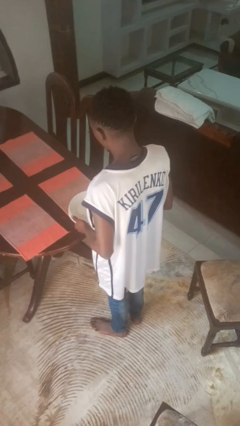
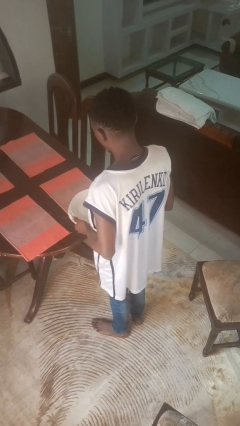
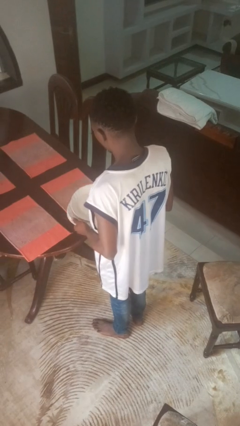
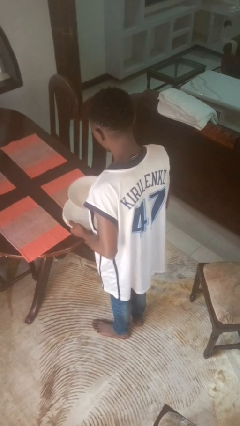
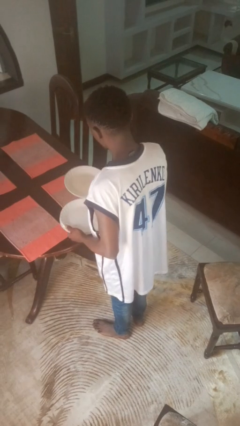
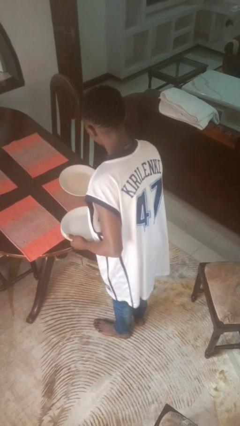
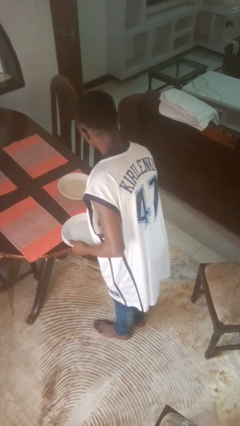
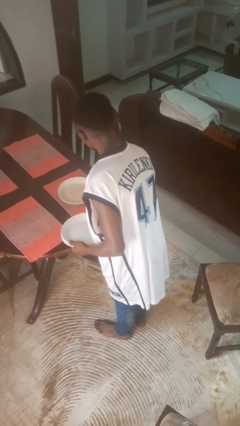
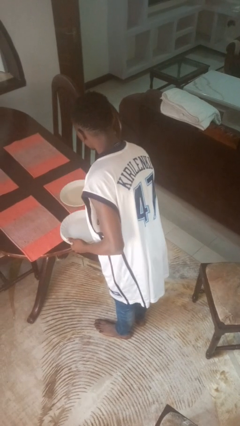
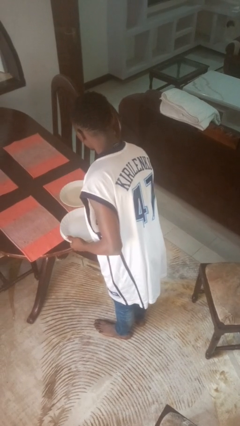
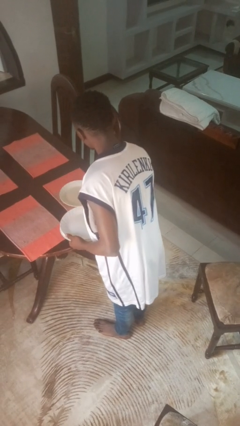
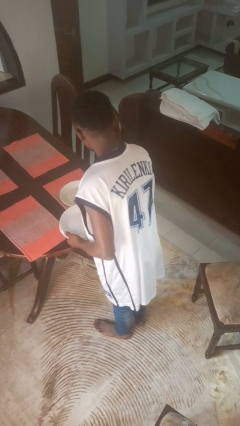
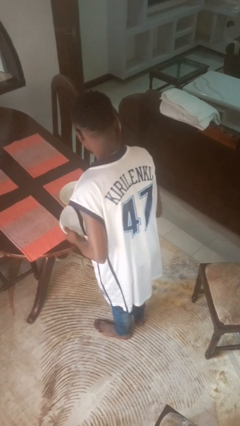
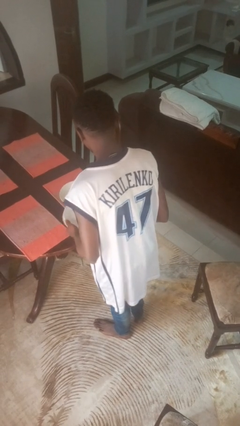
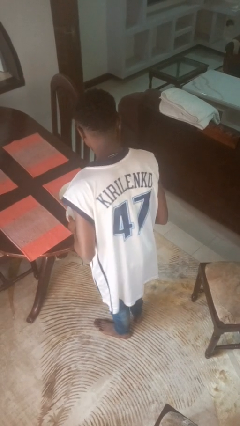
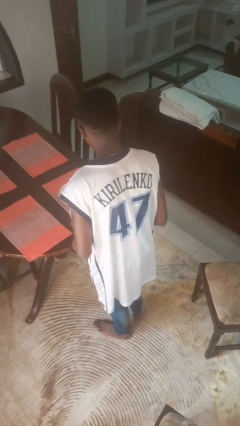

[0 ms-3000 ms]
person sets table

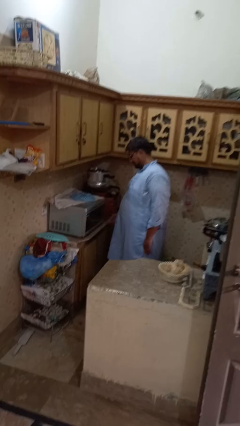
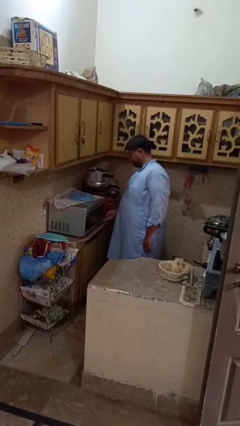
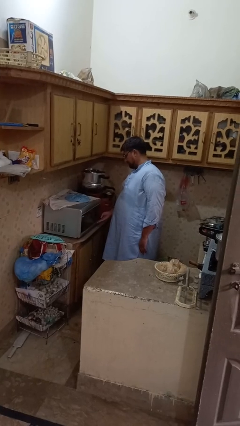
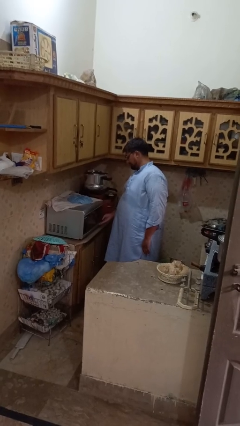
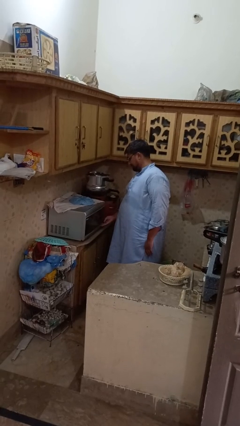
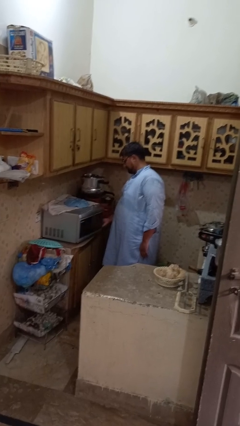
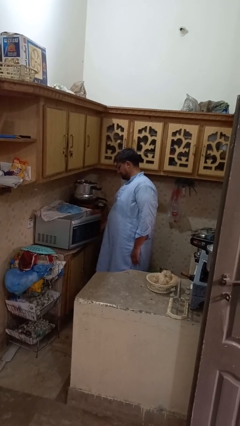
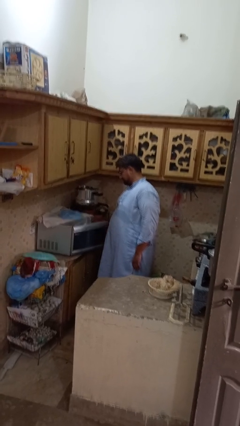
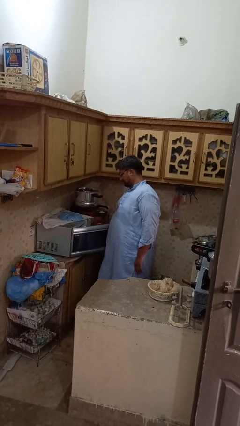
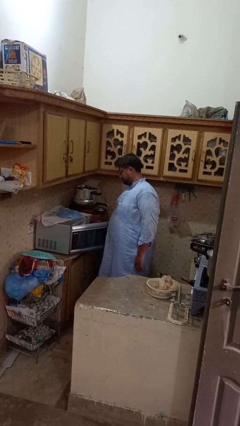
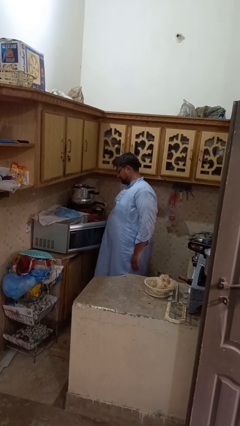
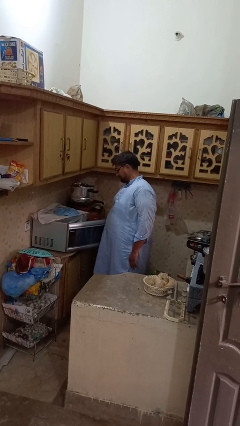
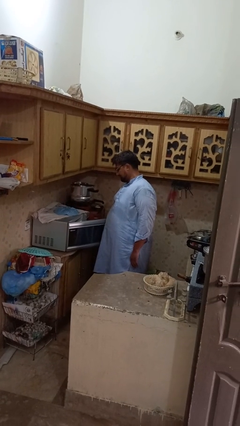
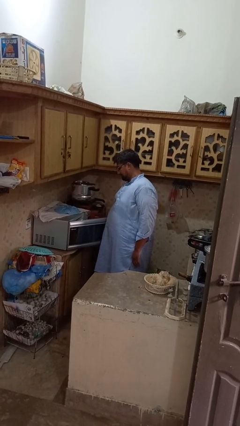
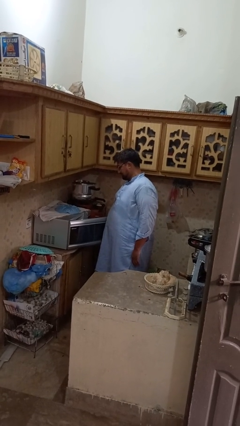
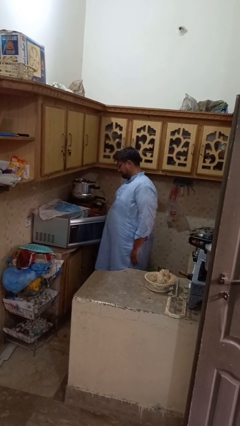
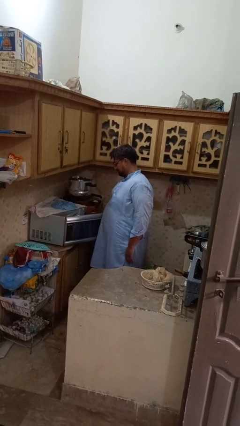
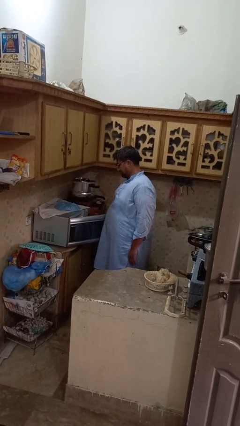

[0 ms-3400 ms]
person opens microwave

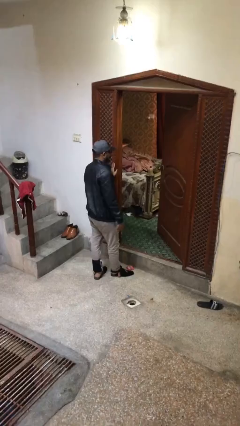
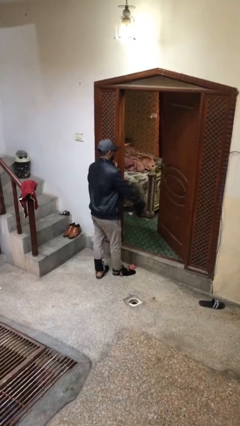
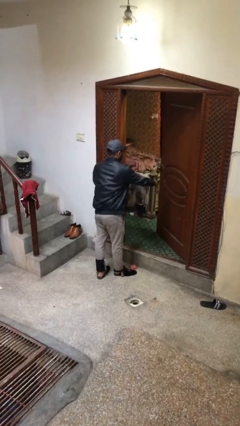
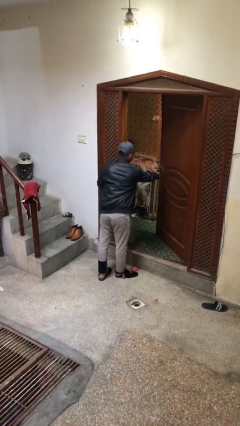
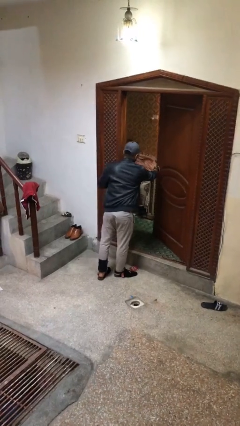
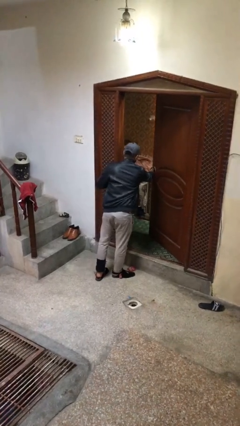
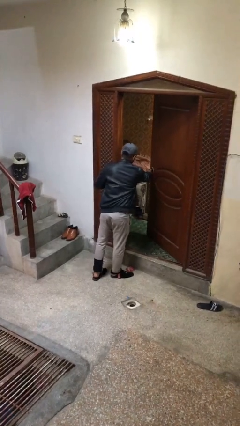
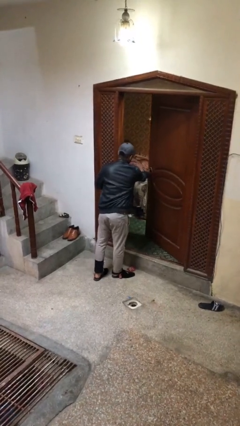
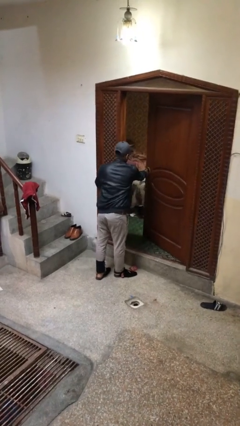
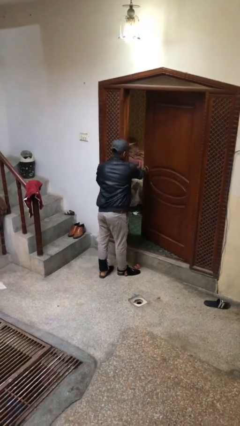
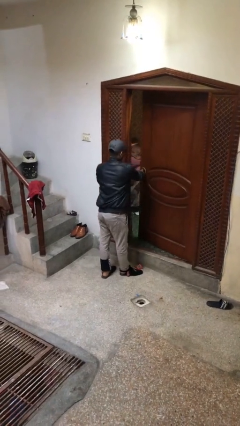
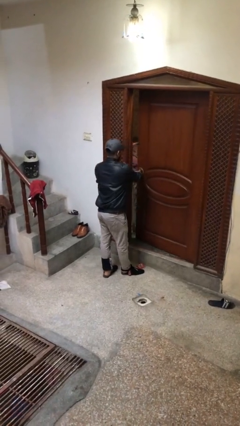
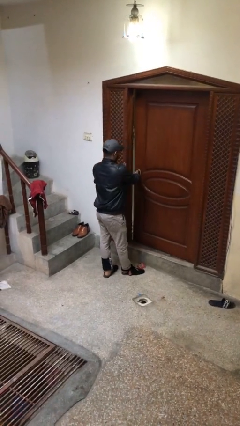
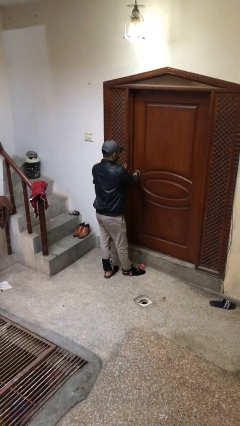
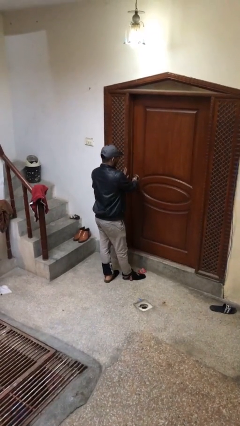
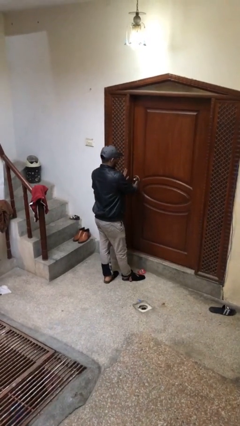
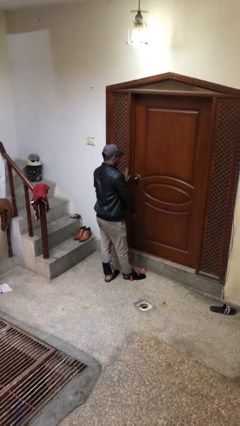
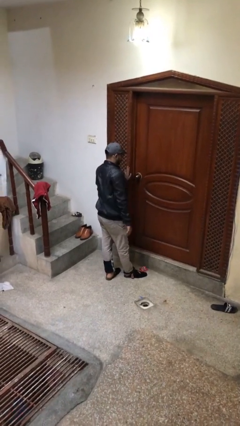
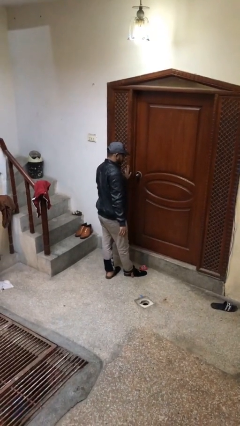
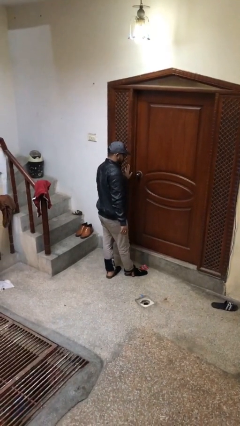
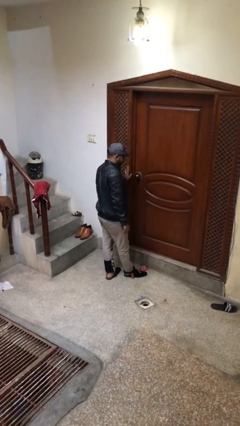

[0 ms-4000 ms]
person closes facility door

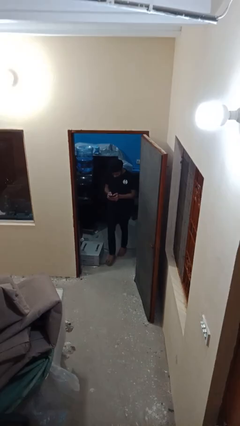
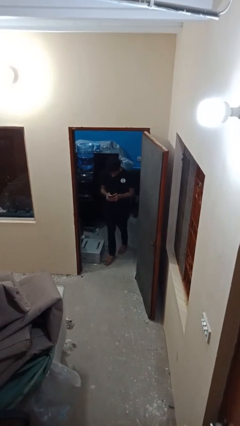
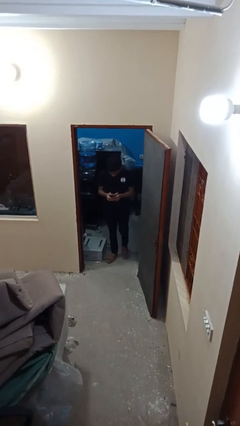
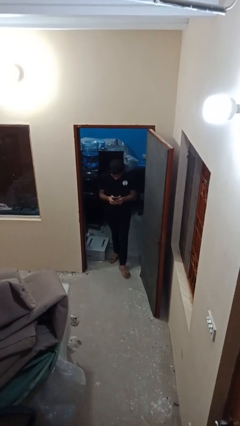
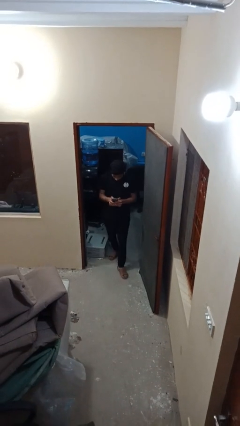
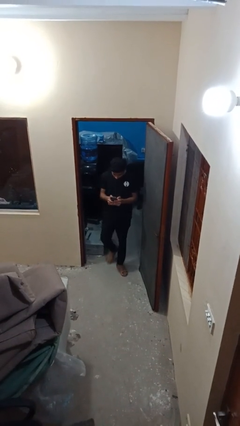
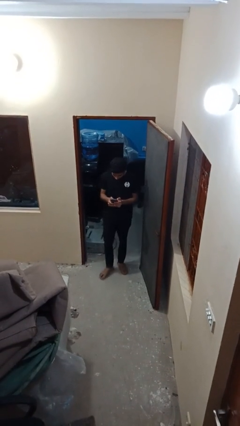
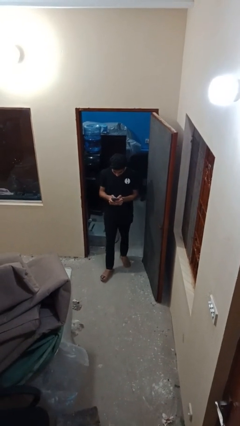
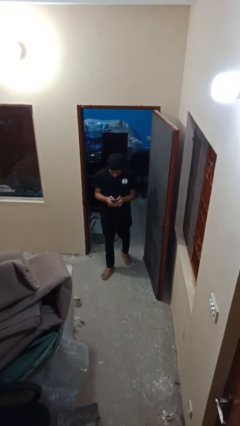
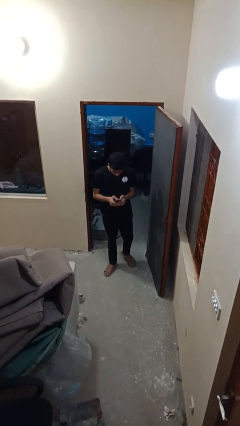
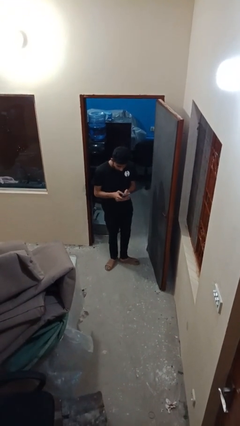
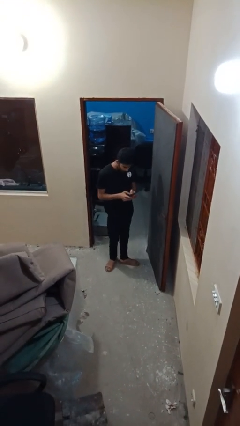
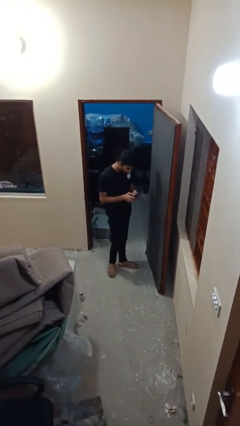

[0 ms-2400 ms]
person enters scene through structure

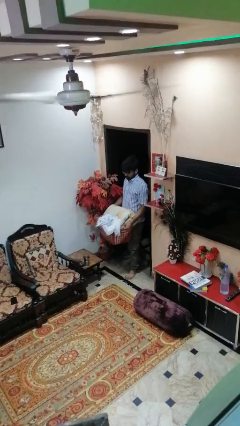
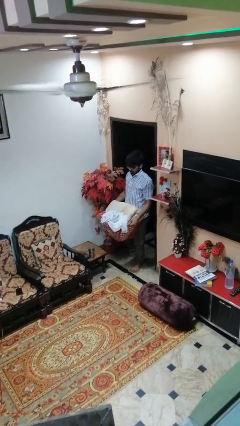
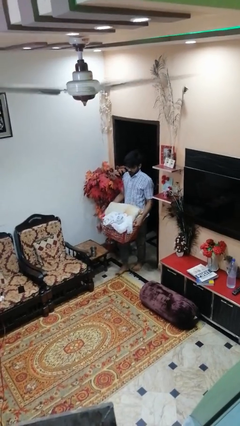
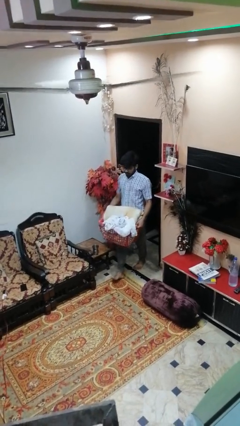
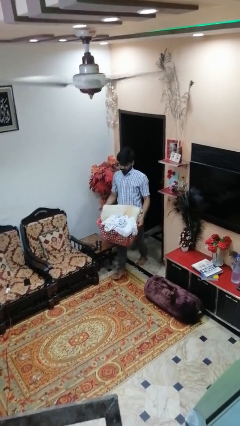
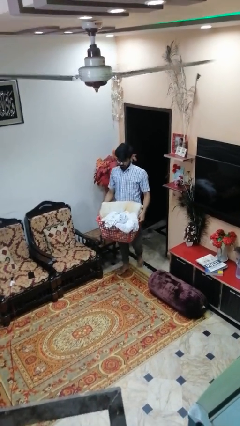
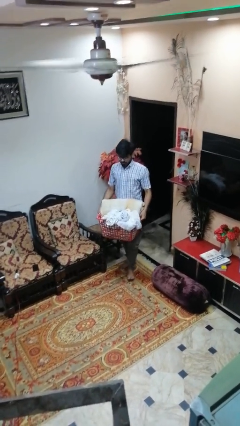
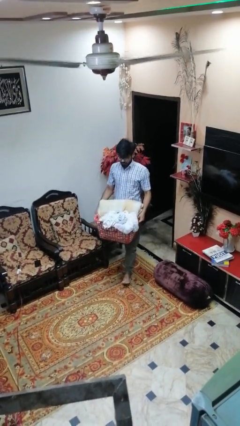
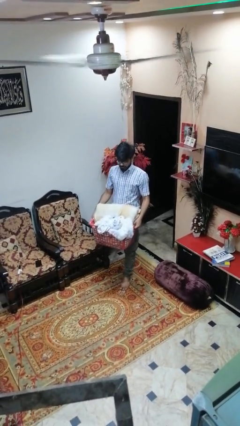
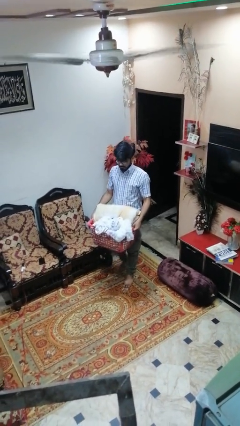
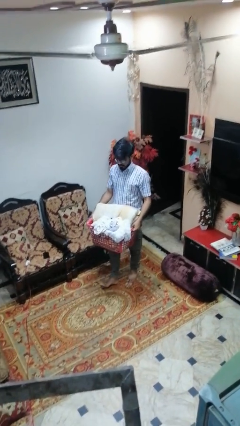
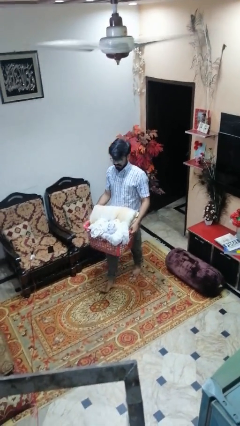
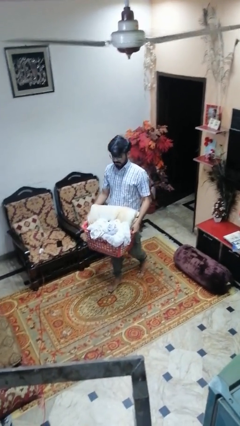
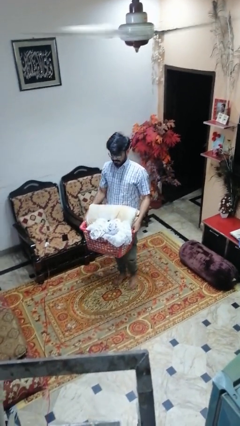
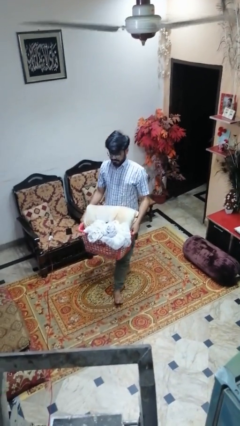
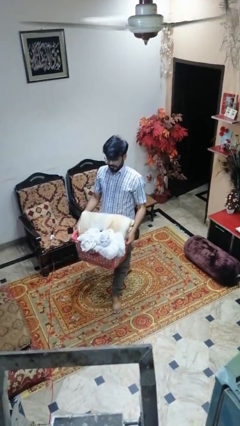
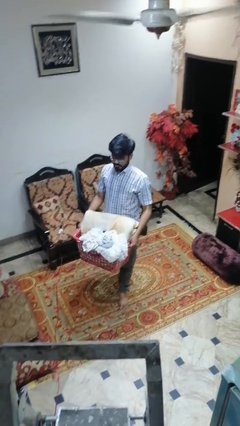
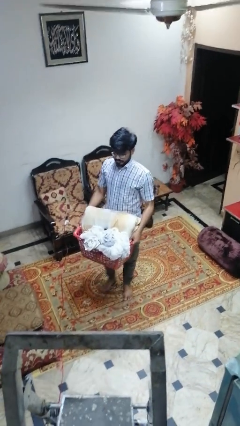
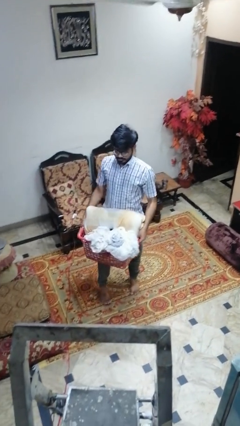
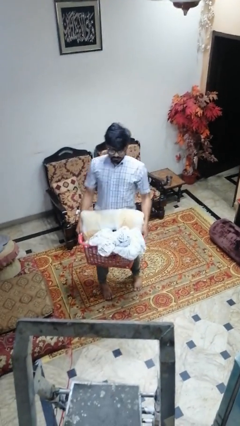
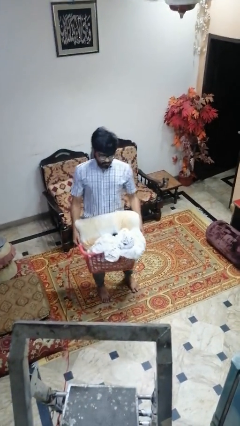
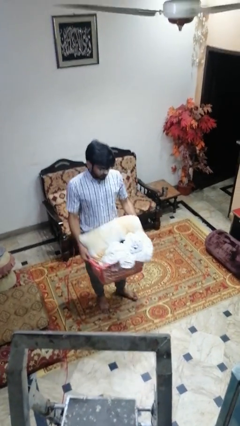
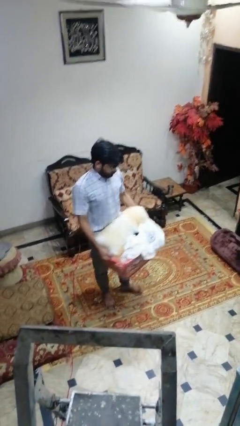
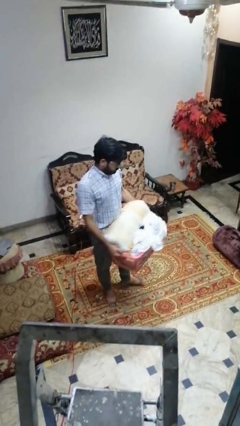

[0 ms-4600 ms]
person carries laundry basket
